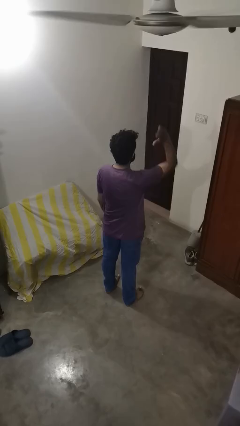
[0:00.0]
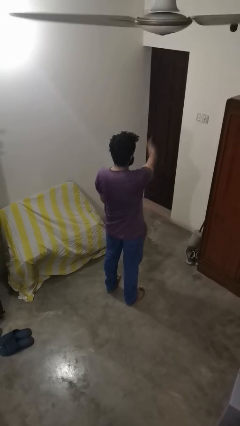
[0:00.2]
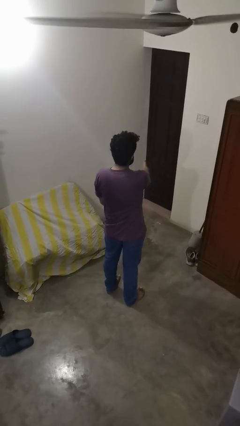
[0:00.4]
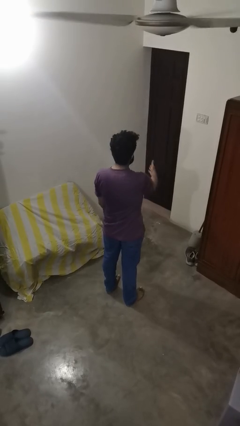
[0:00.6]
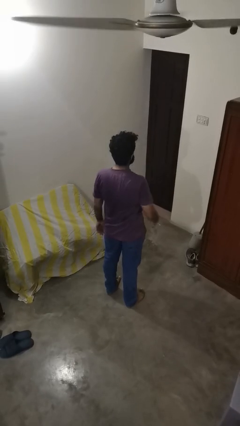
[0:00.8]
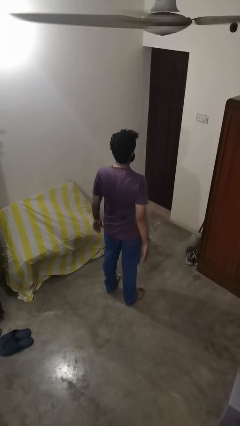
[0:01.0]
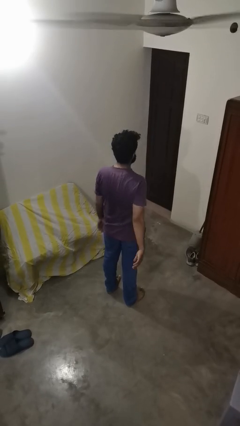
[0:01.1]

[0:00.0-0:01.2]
person karate chop

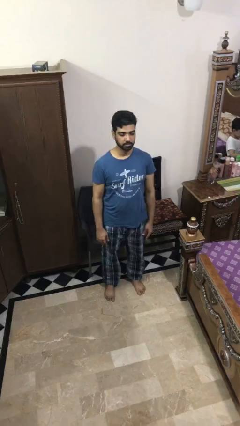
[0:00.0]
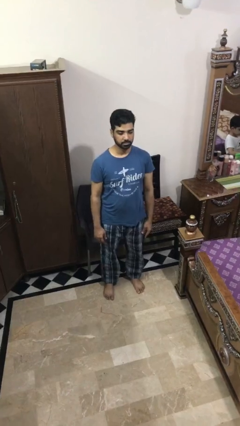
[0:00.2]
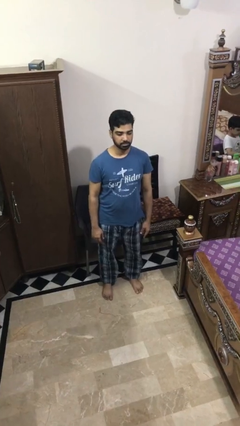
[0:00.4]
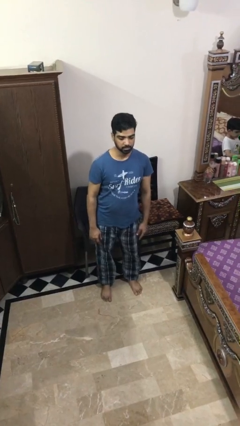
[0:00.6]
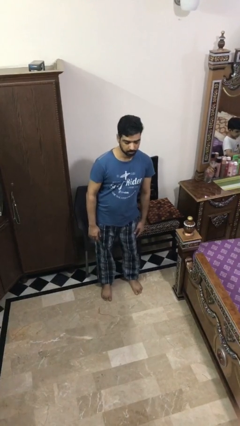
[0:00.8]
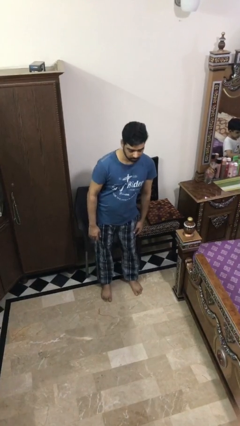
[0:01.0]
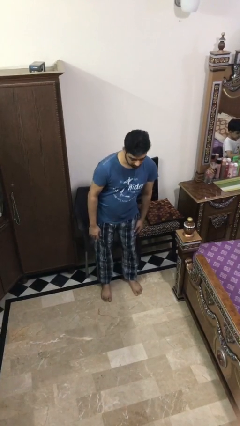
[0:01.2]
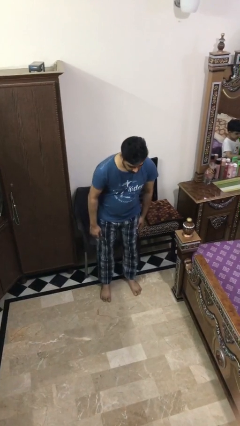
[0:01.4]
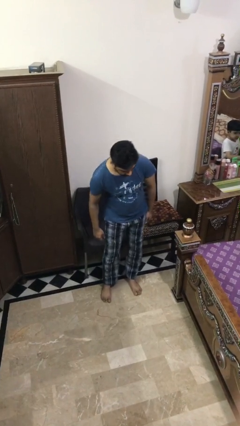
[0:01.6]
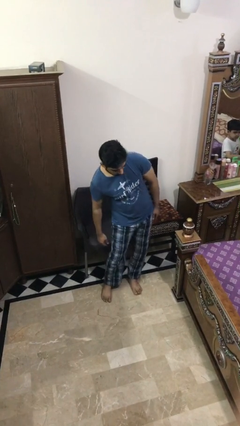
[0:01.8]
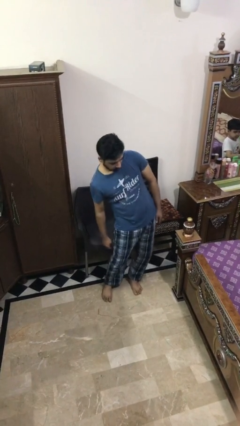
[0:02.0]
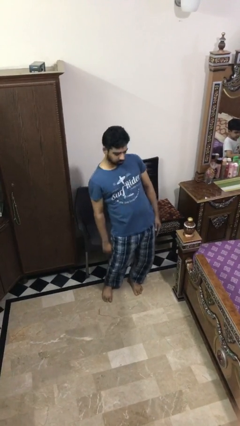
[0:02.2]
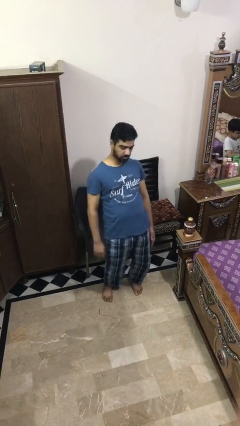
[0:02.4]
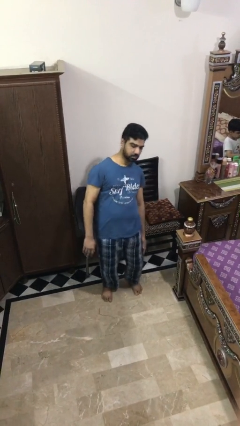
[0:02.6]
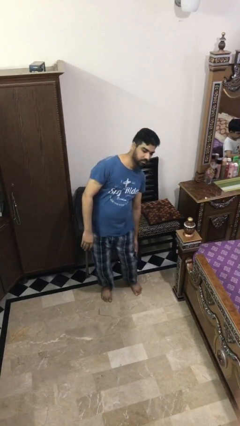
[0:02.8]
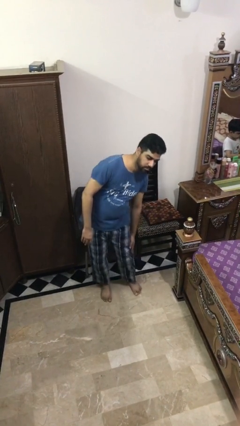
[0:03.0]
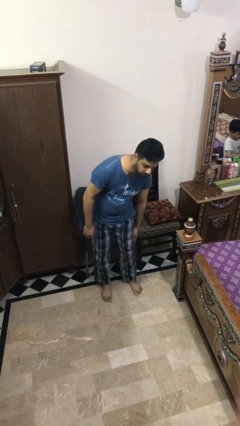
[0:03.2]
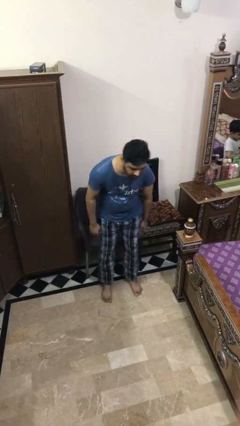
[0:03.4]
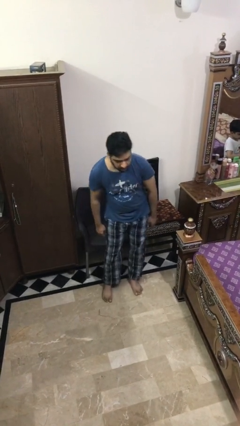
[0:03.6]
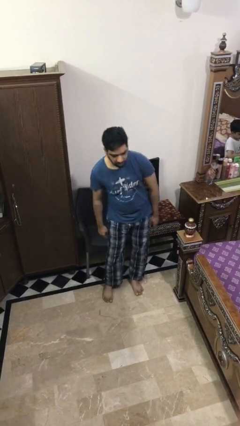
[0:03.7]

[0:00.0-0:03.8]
person wiggles hips

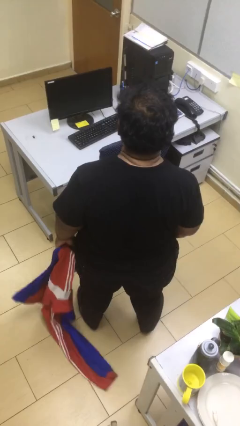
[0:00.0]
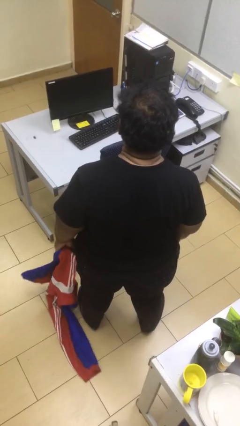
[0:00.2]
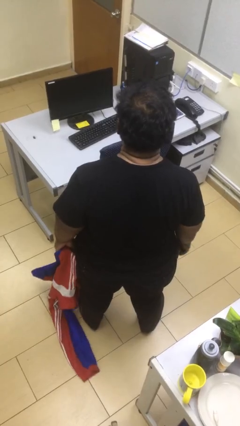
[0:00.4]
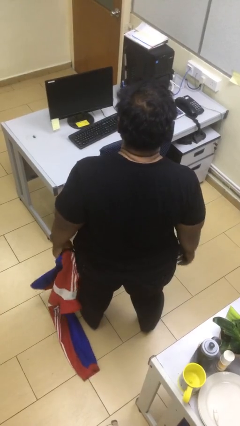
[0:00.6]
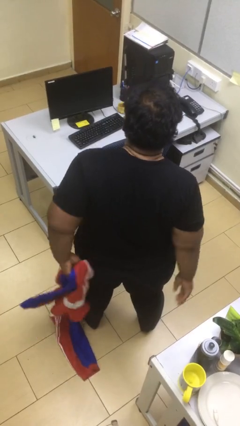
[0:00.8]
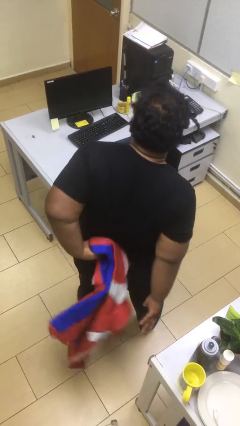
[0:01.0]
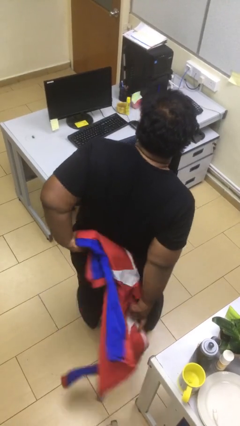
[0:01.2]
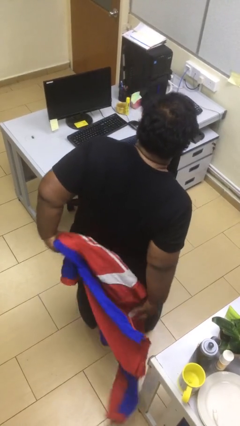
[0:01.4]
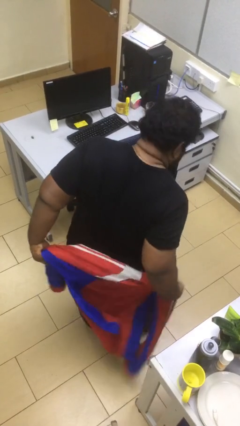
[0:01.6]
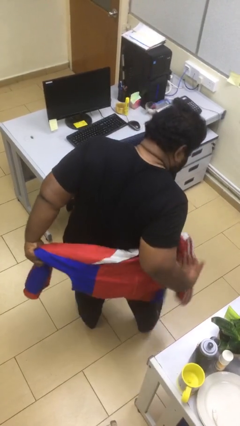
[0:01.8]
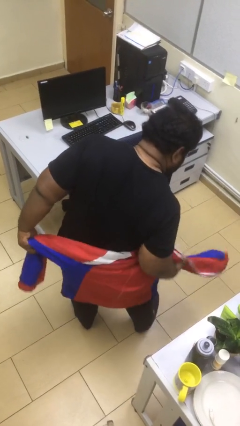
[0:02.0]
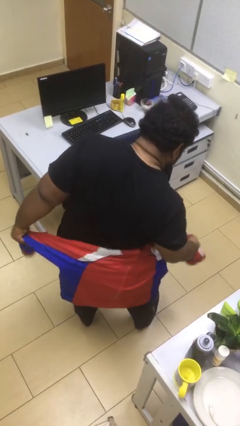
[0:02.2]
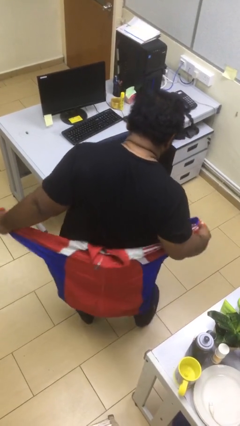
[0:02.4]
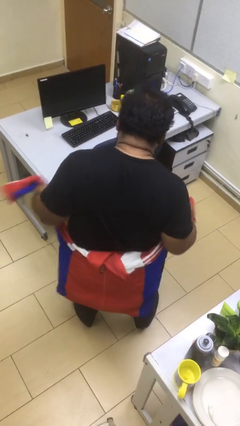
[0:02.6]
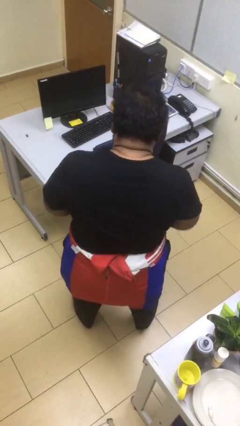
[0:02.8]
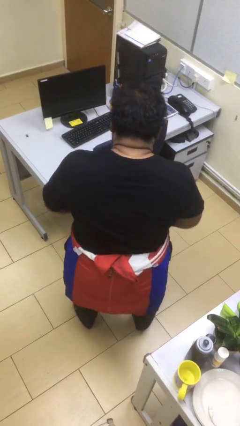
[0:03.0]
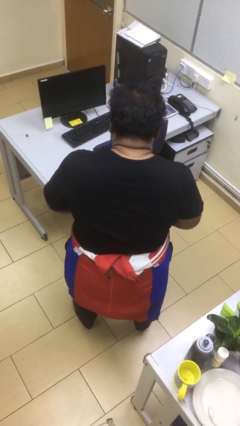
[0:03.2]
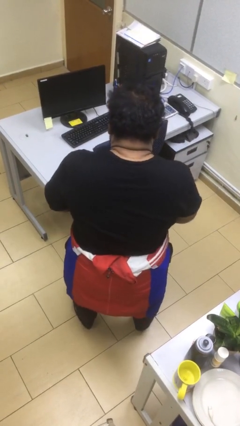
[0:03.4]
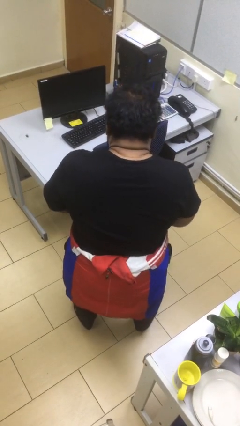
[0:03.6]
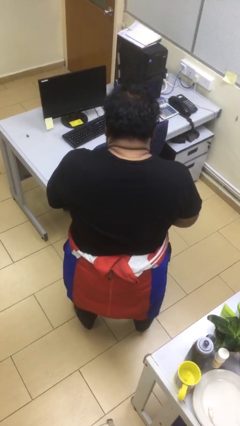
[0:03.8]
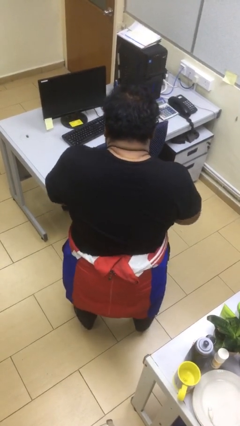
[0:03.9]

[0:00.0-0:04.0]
person ties jacket around waist

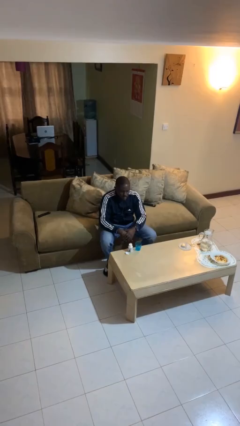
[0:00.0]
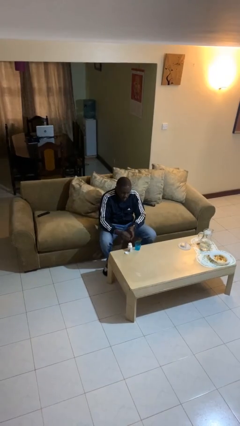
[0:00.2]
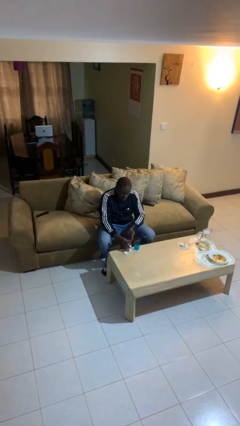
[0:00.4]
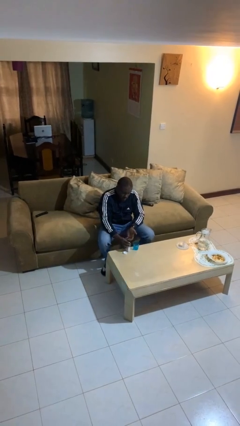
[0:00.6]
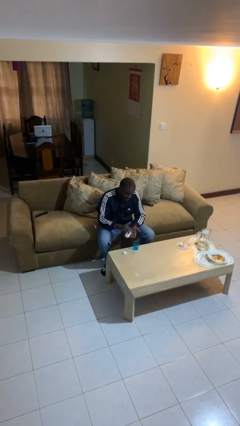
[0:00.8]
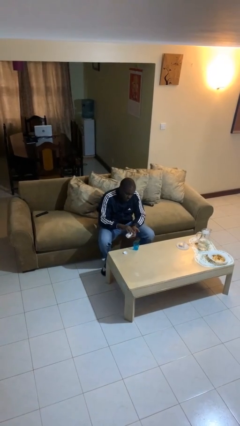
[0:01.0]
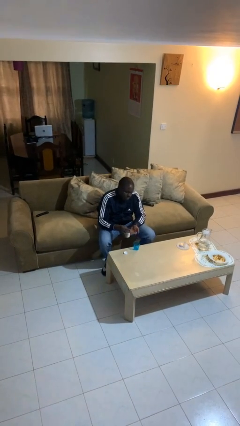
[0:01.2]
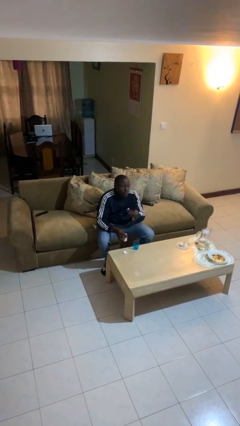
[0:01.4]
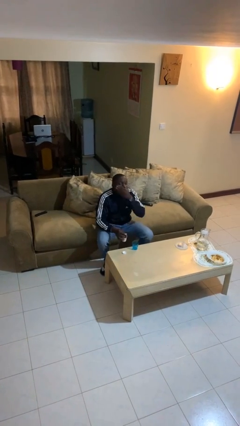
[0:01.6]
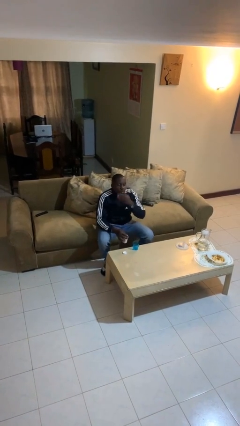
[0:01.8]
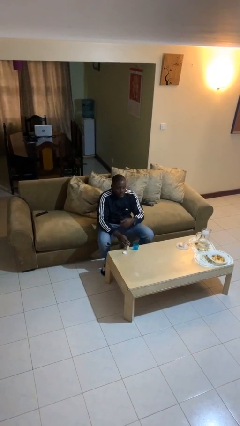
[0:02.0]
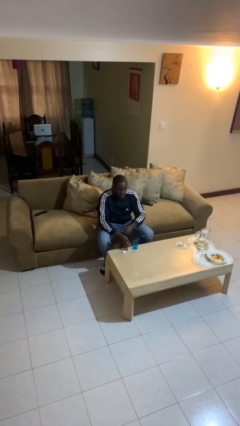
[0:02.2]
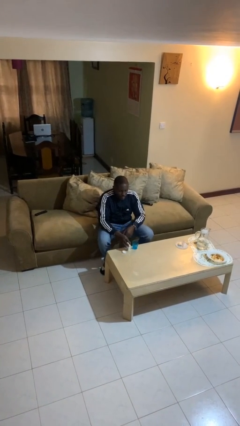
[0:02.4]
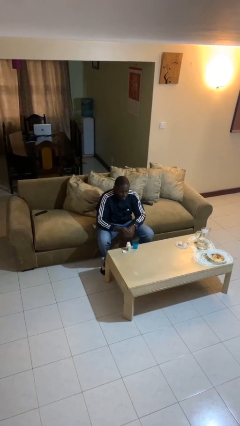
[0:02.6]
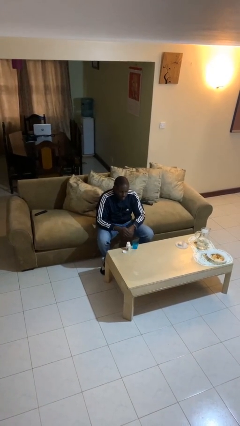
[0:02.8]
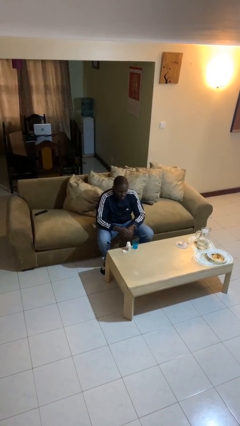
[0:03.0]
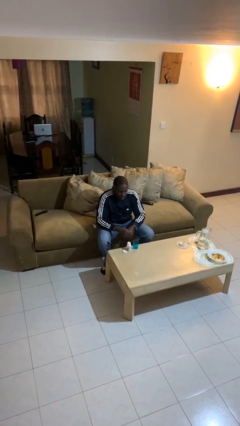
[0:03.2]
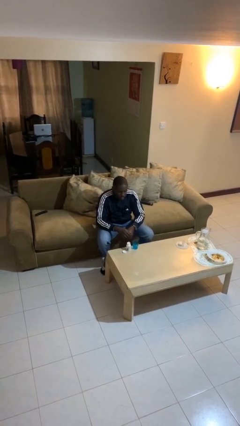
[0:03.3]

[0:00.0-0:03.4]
person takes medicine pills

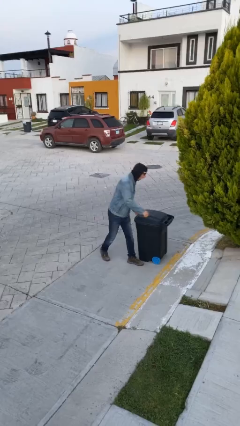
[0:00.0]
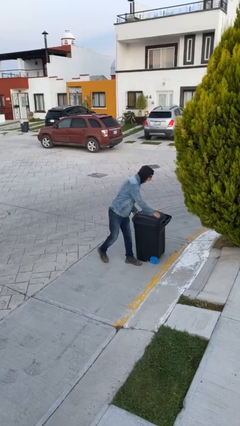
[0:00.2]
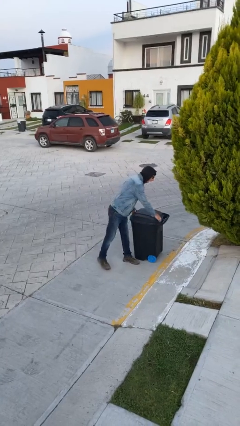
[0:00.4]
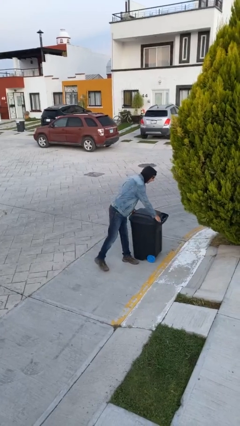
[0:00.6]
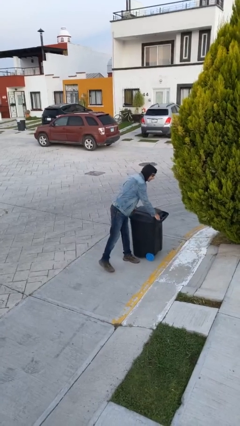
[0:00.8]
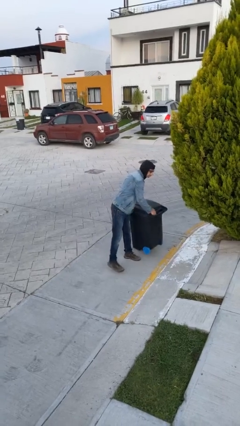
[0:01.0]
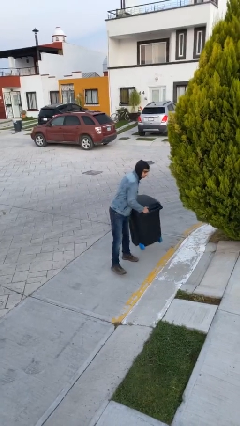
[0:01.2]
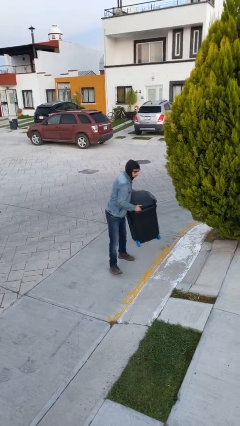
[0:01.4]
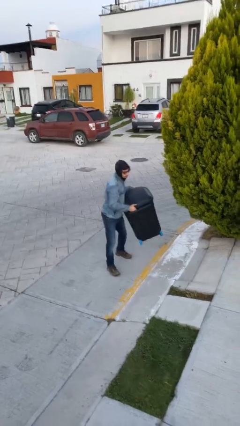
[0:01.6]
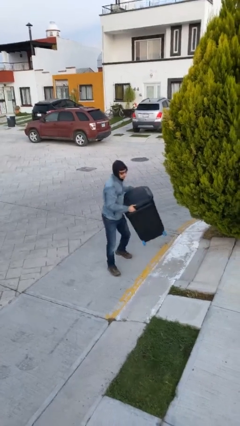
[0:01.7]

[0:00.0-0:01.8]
person picks up object from floor

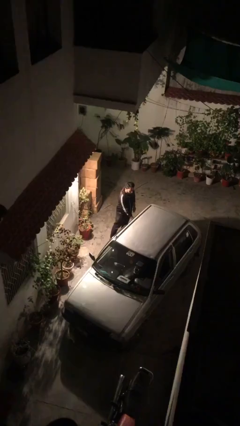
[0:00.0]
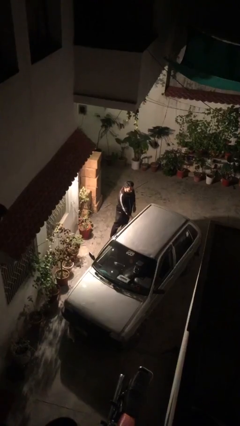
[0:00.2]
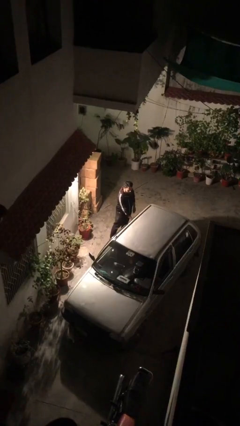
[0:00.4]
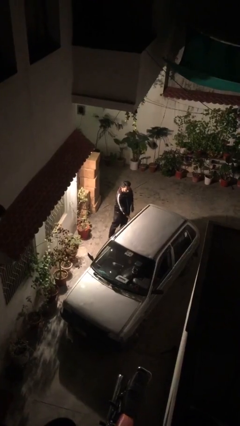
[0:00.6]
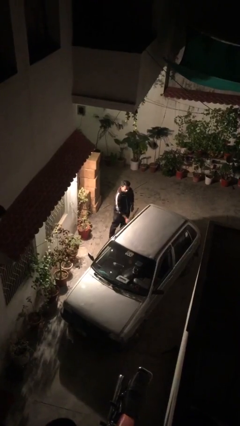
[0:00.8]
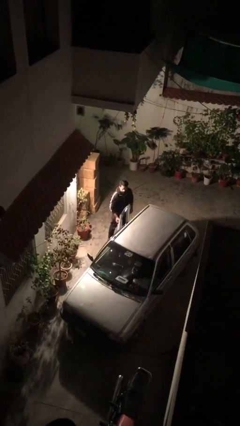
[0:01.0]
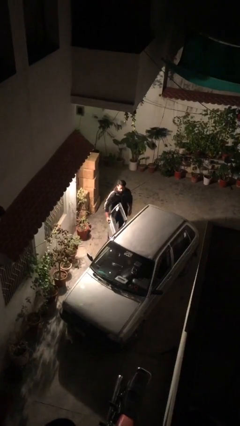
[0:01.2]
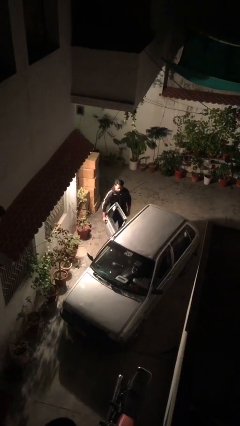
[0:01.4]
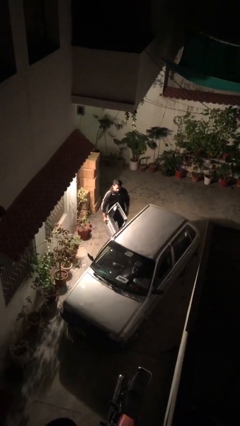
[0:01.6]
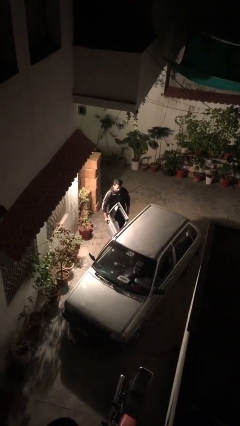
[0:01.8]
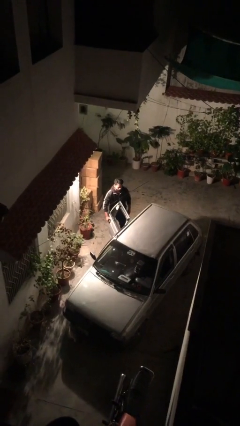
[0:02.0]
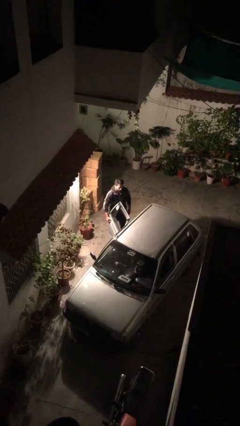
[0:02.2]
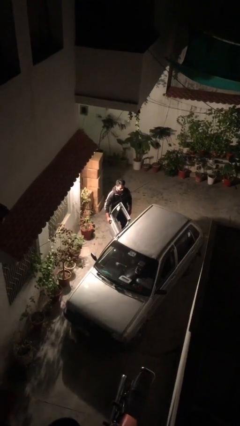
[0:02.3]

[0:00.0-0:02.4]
person opens car door

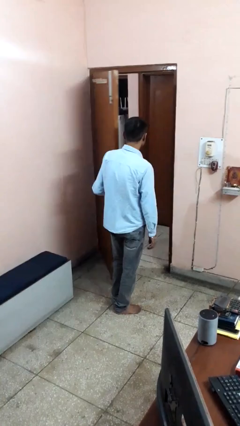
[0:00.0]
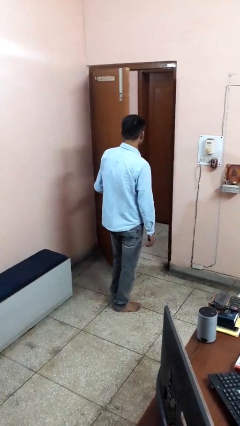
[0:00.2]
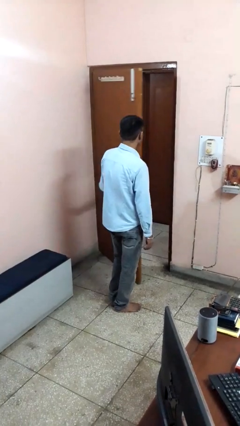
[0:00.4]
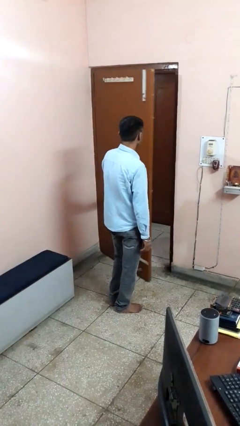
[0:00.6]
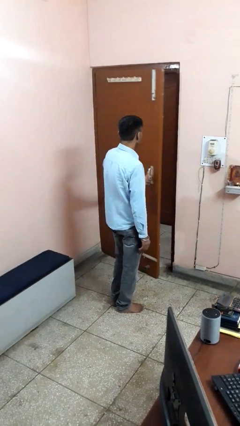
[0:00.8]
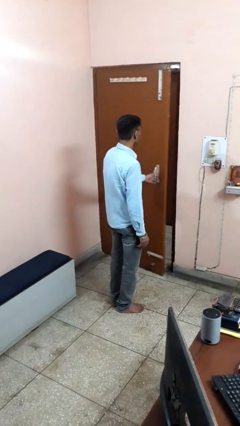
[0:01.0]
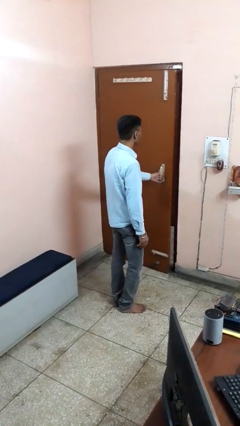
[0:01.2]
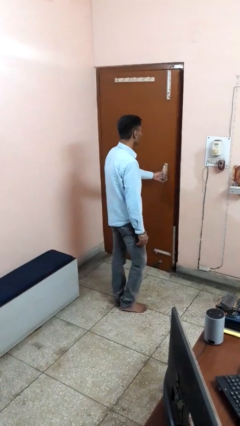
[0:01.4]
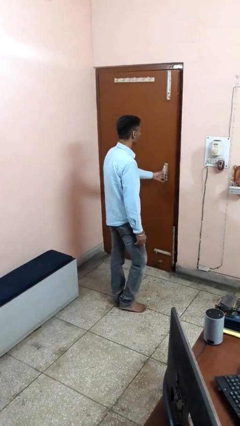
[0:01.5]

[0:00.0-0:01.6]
person closes facility door
